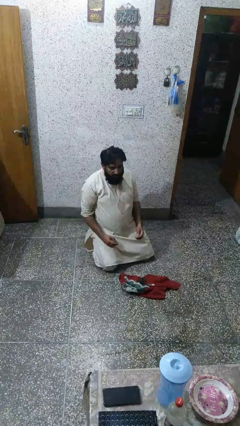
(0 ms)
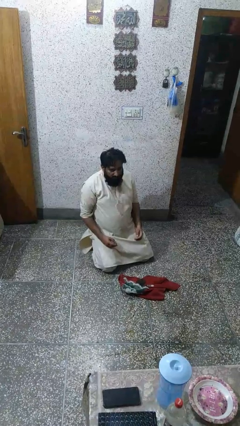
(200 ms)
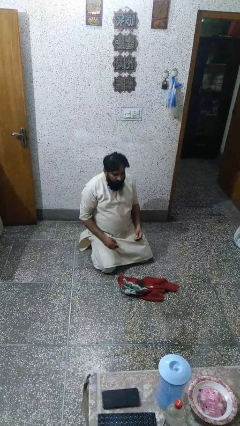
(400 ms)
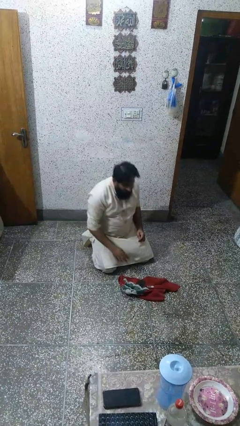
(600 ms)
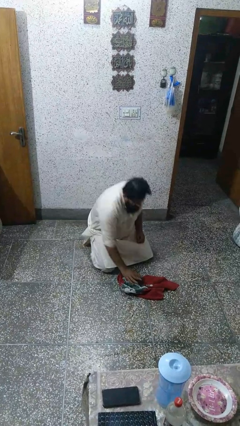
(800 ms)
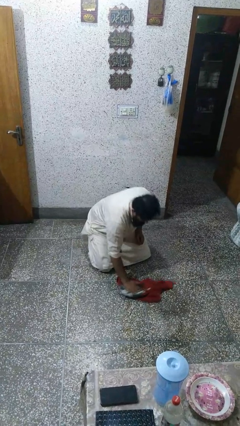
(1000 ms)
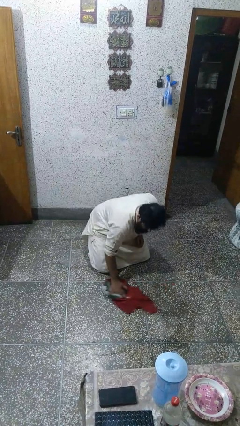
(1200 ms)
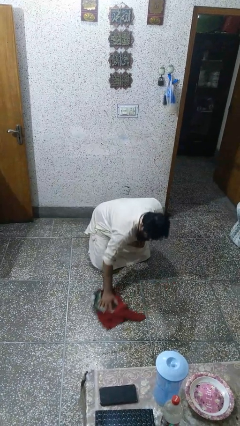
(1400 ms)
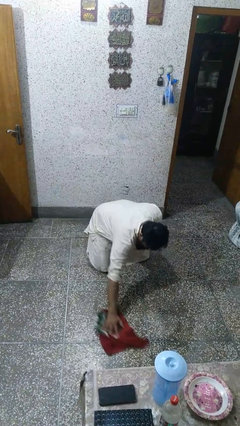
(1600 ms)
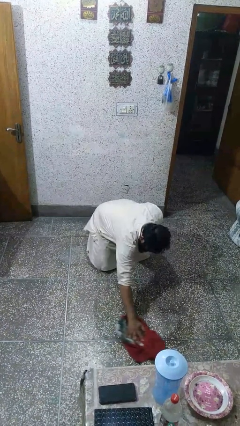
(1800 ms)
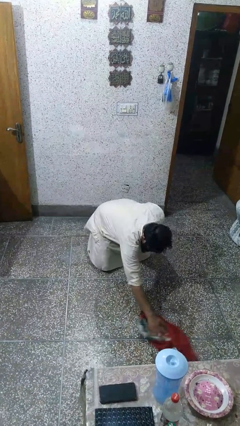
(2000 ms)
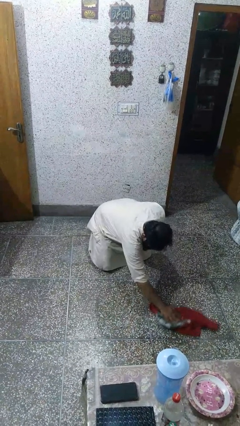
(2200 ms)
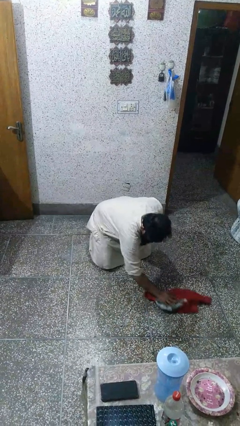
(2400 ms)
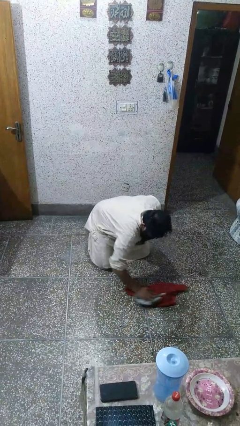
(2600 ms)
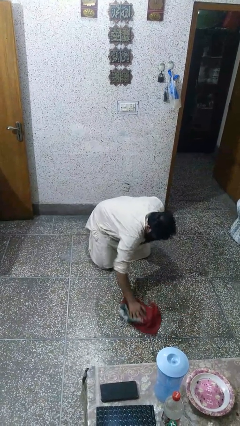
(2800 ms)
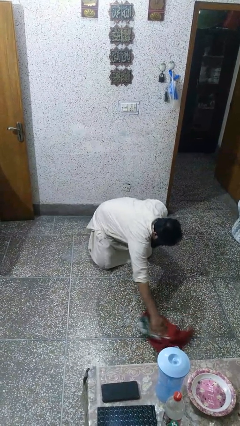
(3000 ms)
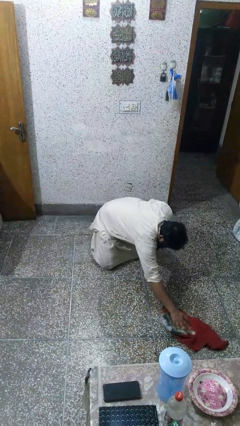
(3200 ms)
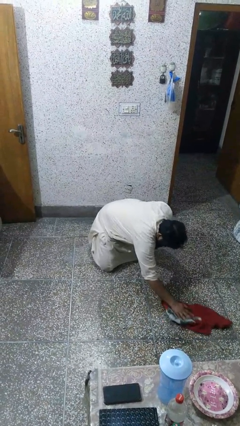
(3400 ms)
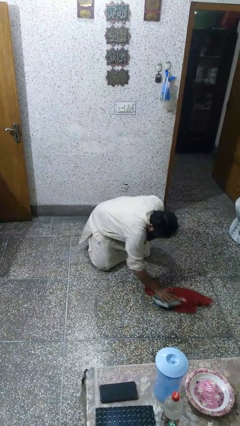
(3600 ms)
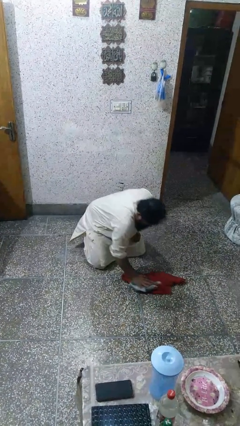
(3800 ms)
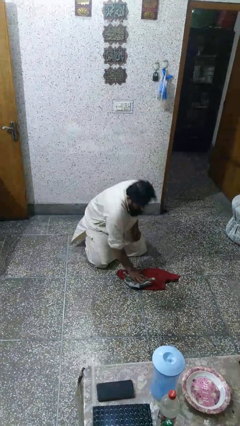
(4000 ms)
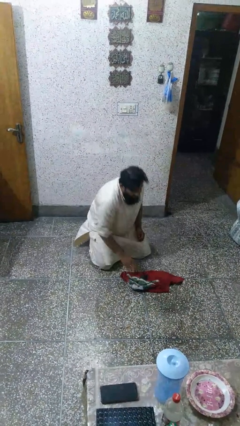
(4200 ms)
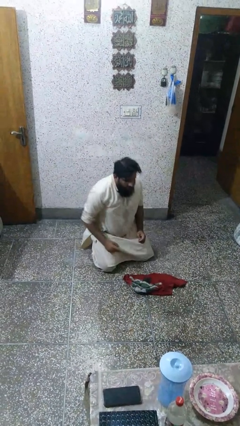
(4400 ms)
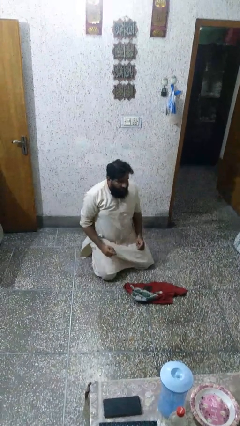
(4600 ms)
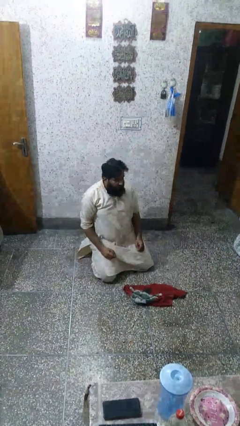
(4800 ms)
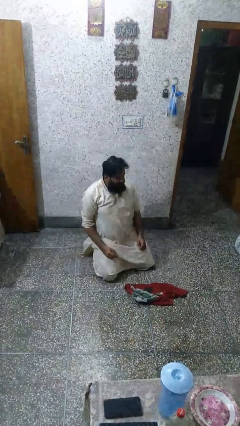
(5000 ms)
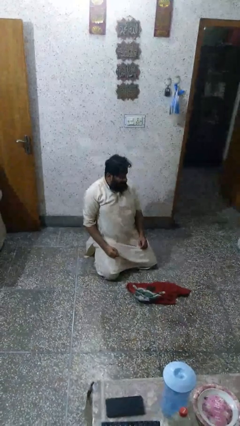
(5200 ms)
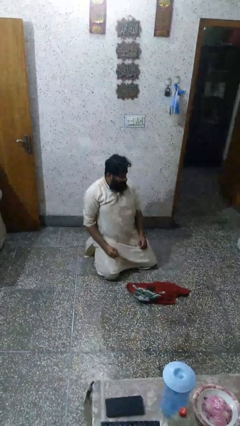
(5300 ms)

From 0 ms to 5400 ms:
person mops

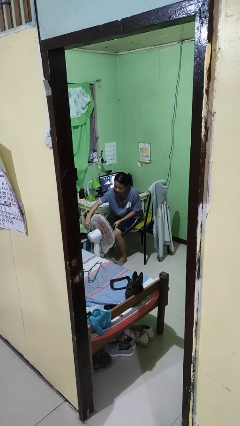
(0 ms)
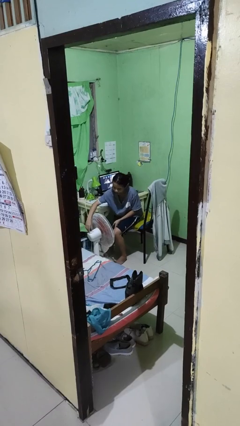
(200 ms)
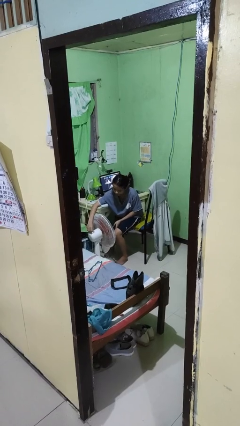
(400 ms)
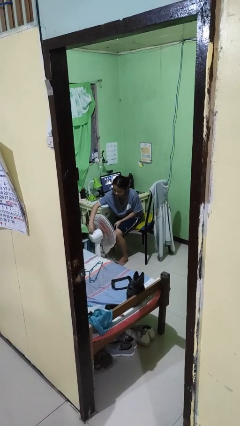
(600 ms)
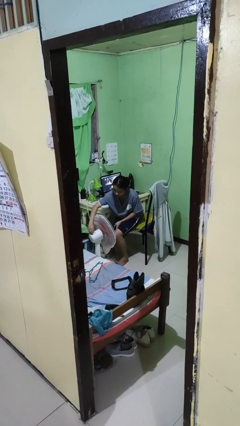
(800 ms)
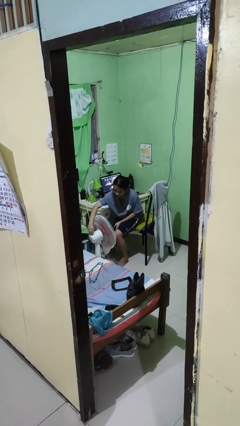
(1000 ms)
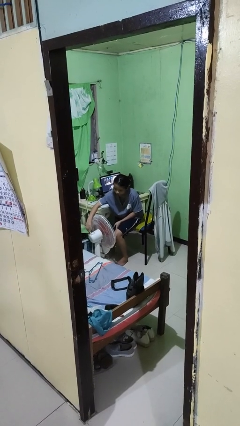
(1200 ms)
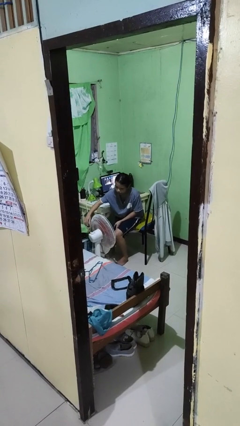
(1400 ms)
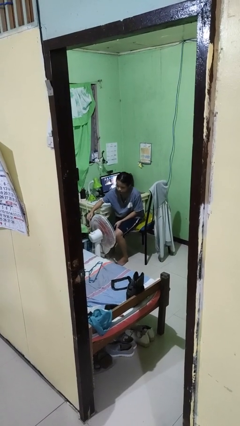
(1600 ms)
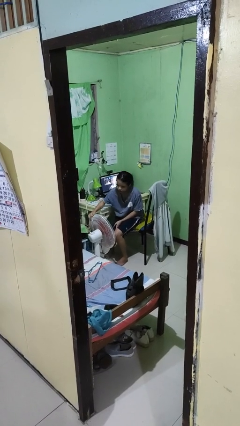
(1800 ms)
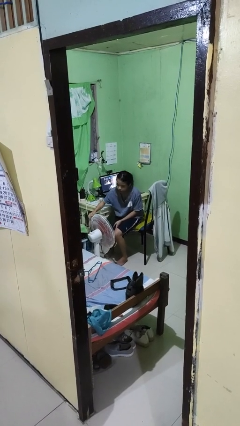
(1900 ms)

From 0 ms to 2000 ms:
person turns off fan

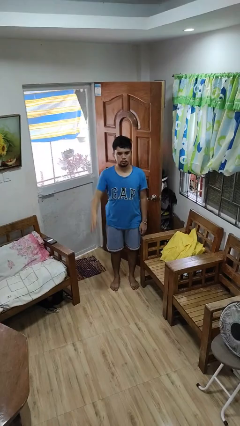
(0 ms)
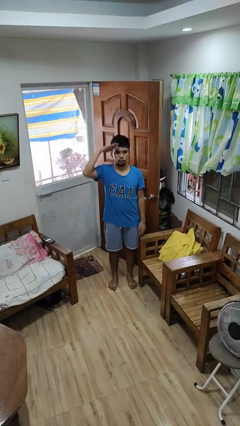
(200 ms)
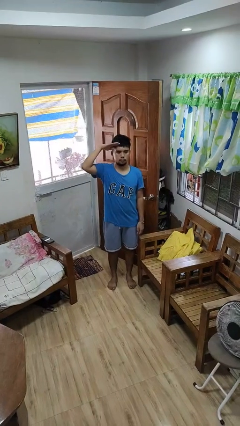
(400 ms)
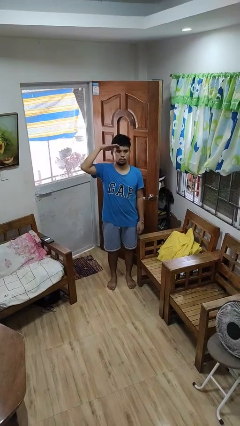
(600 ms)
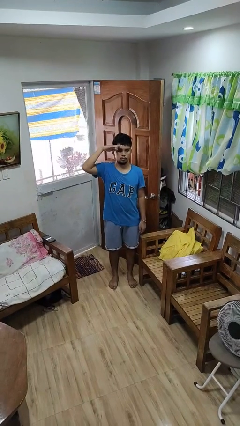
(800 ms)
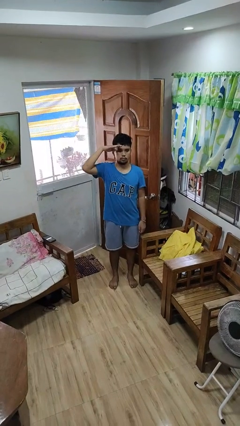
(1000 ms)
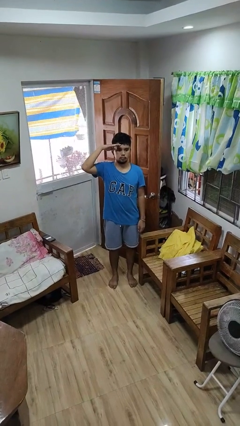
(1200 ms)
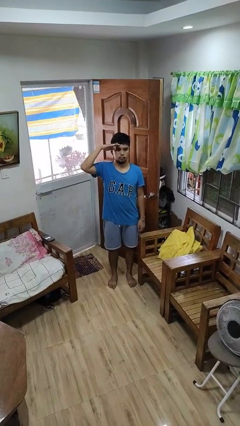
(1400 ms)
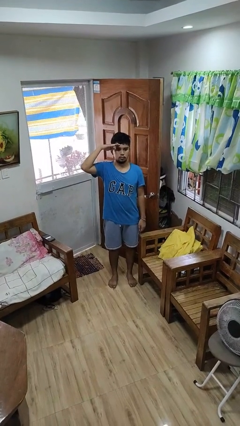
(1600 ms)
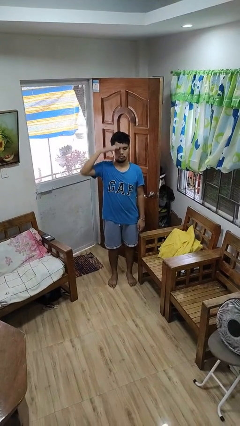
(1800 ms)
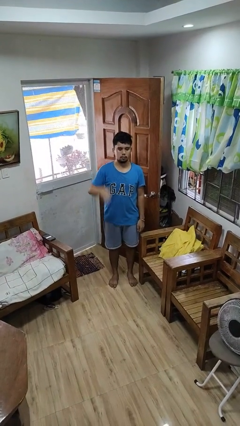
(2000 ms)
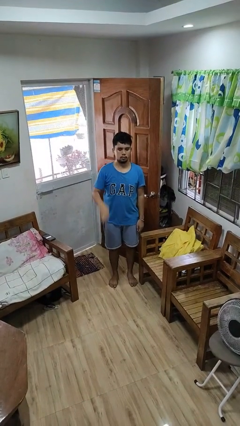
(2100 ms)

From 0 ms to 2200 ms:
person salutes

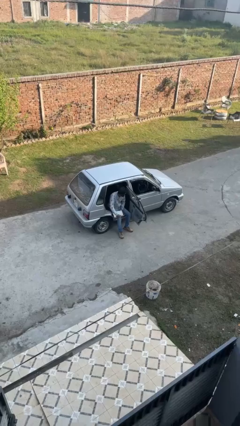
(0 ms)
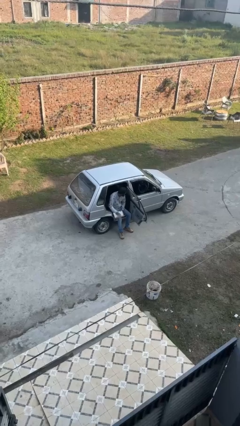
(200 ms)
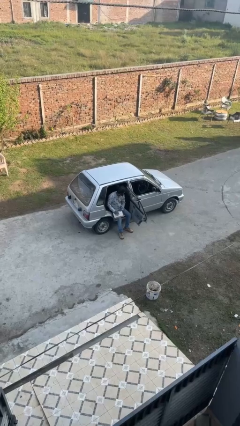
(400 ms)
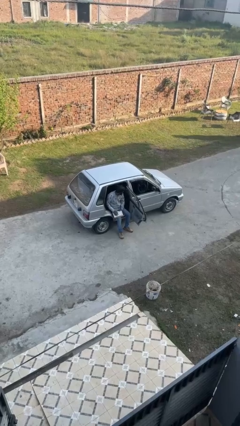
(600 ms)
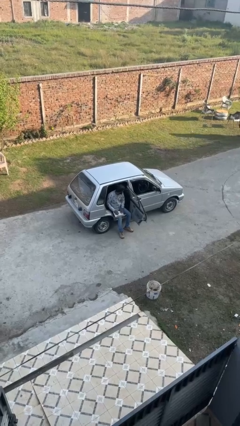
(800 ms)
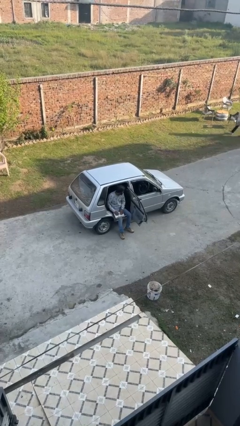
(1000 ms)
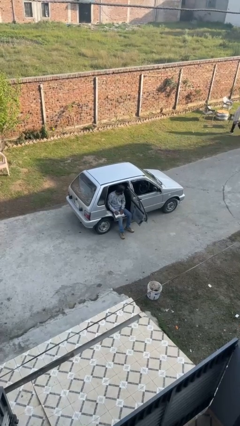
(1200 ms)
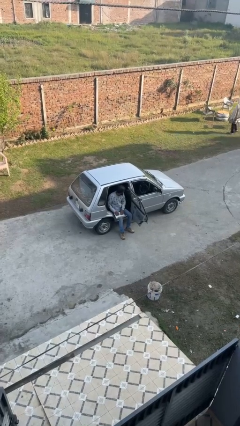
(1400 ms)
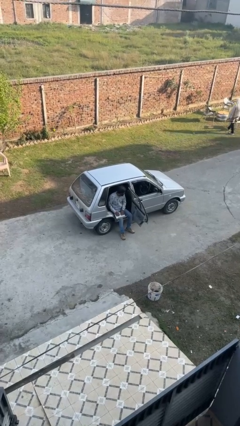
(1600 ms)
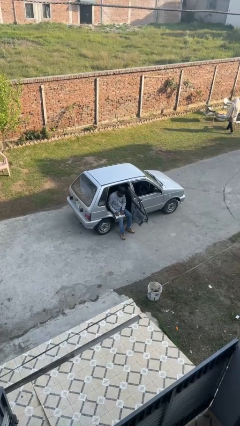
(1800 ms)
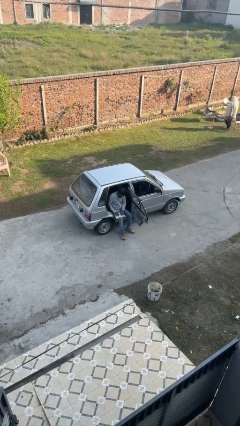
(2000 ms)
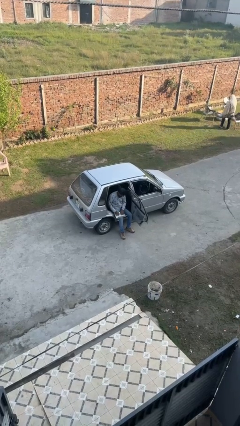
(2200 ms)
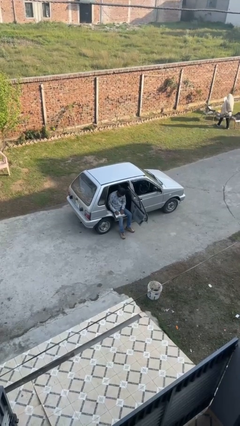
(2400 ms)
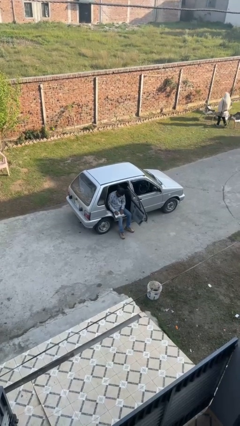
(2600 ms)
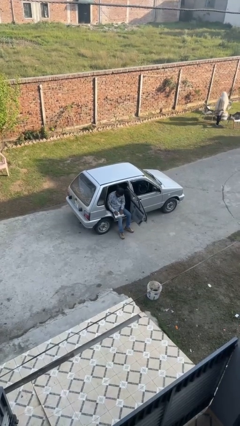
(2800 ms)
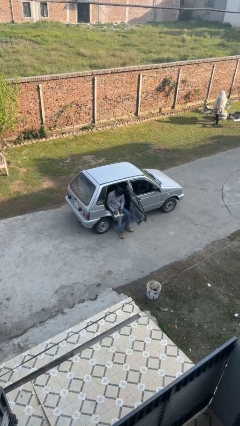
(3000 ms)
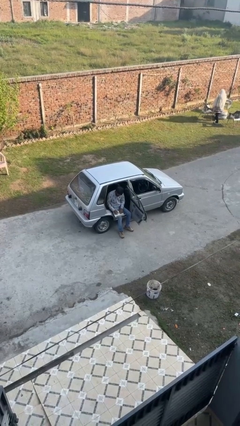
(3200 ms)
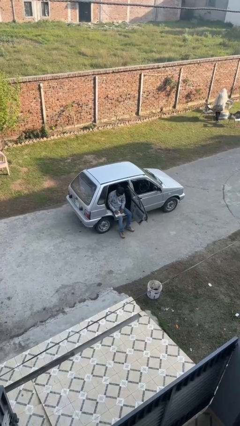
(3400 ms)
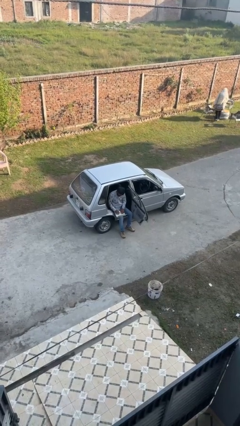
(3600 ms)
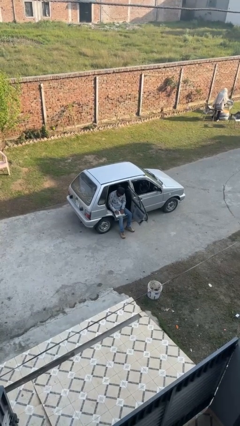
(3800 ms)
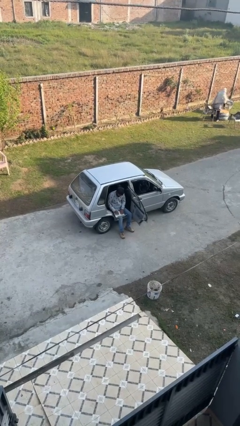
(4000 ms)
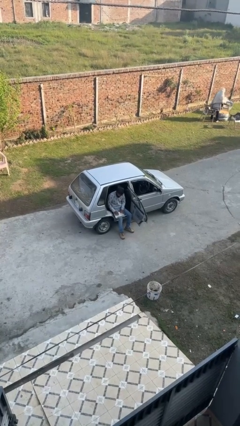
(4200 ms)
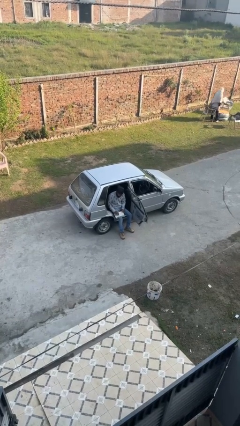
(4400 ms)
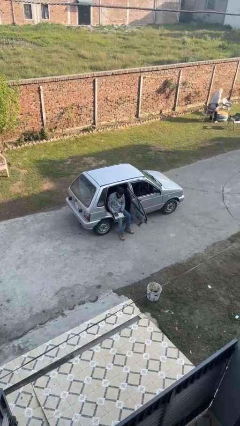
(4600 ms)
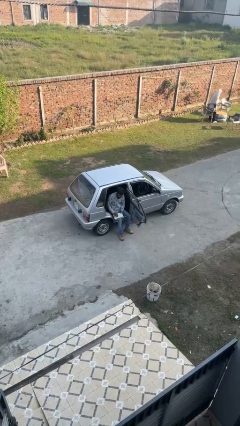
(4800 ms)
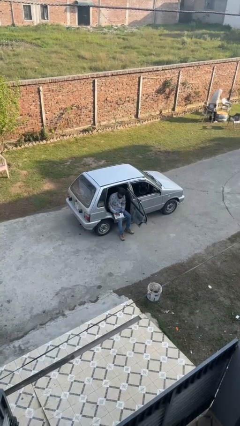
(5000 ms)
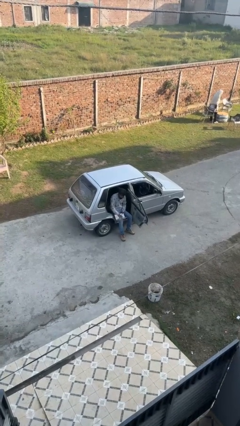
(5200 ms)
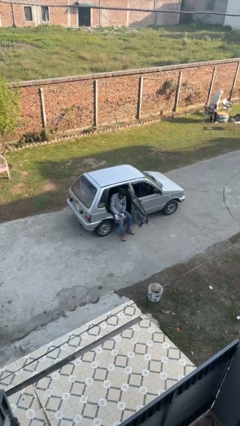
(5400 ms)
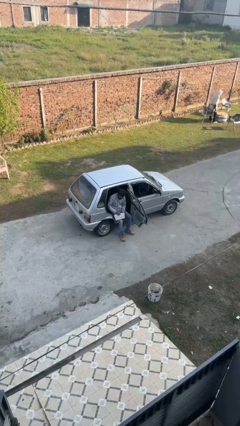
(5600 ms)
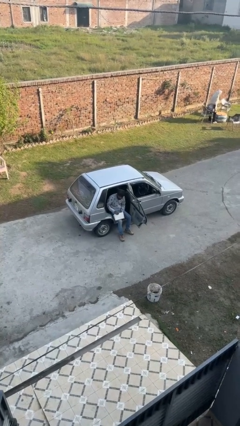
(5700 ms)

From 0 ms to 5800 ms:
person interacts with laptop

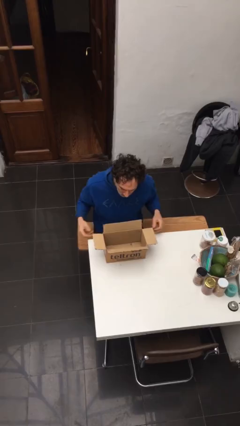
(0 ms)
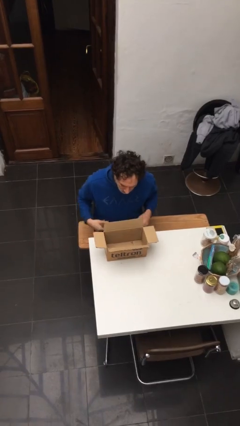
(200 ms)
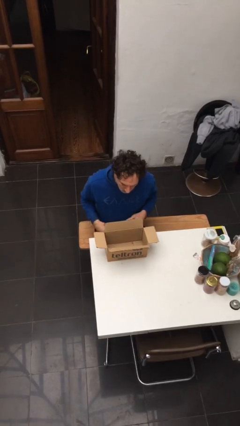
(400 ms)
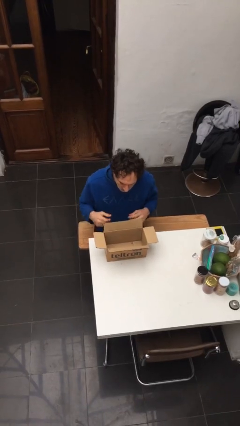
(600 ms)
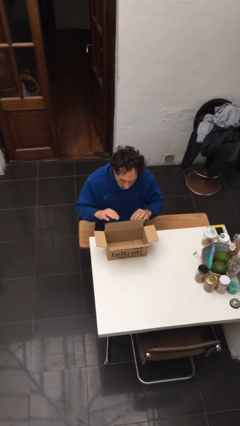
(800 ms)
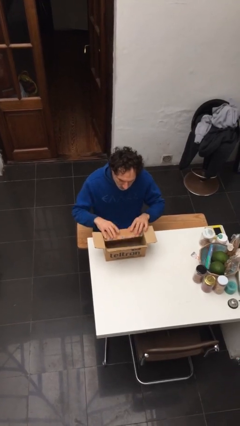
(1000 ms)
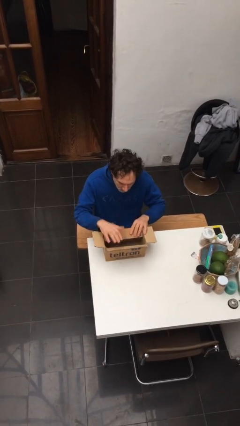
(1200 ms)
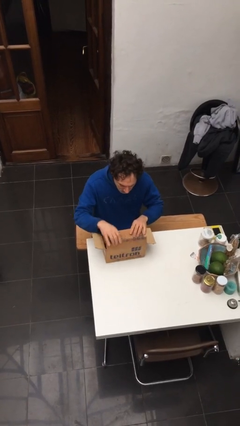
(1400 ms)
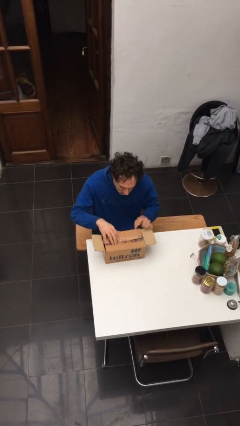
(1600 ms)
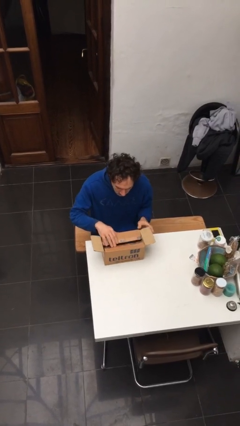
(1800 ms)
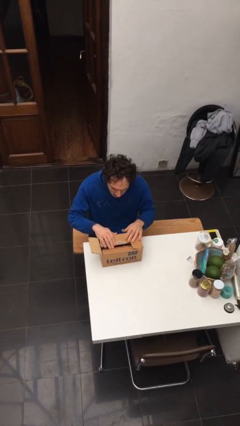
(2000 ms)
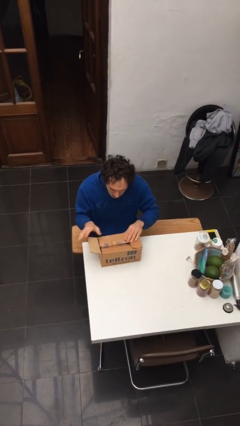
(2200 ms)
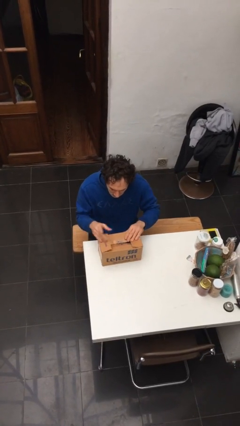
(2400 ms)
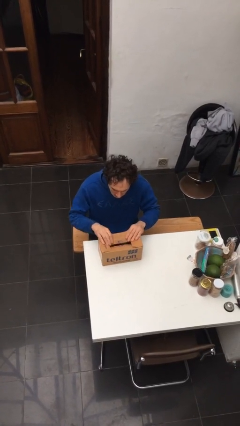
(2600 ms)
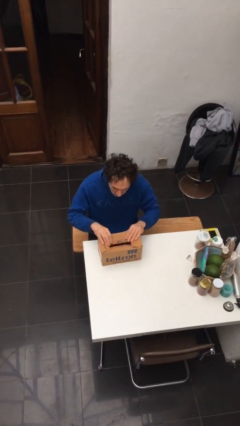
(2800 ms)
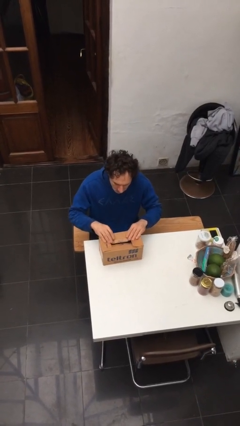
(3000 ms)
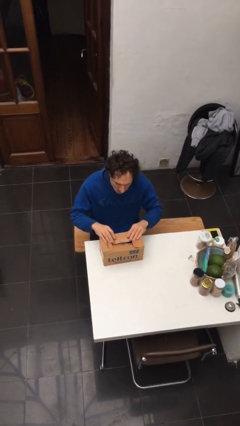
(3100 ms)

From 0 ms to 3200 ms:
person closes box
